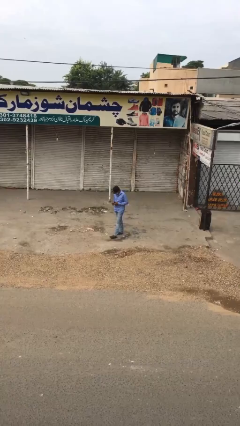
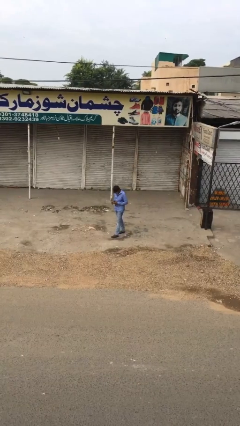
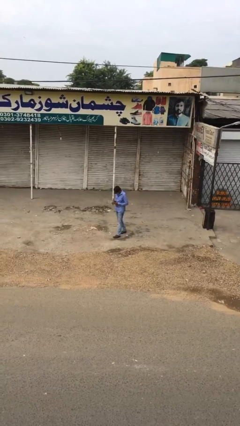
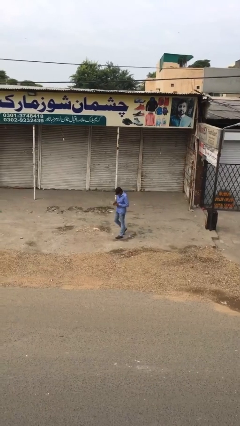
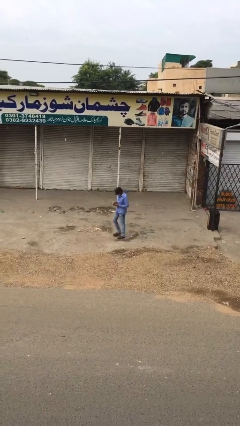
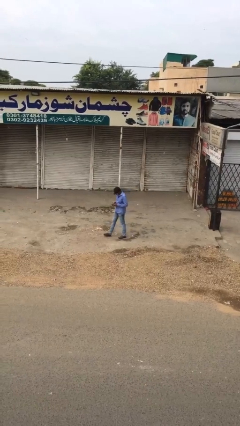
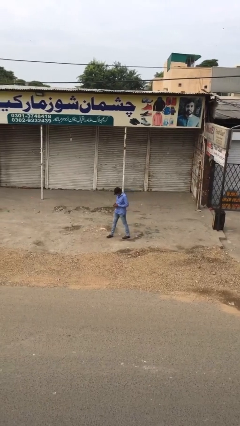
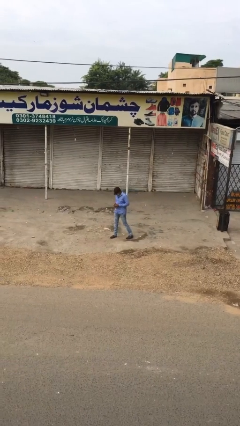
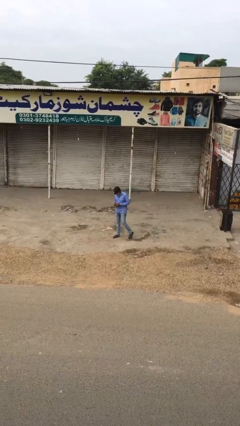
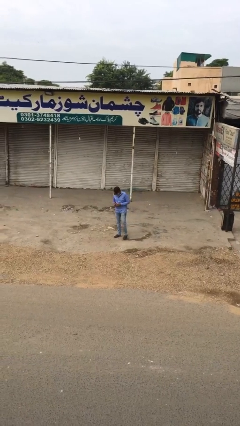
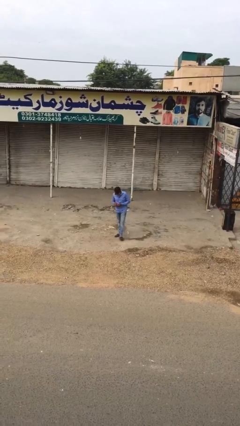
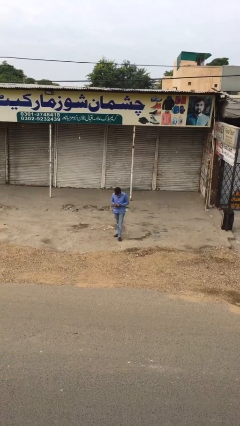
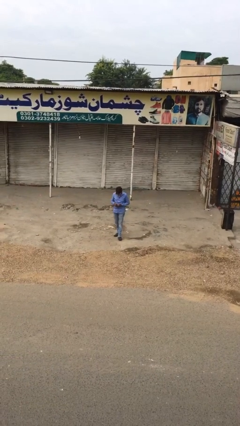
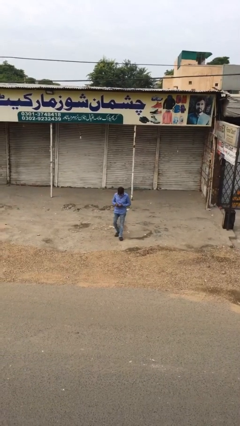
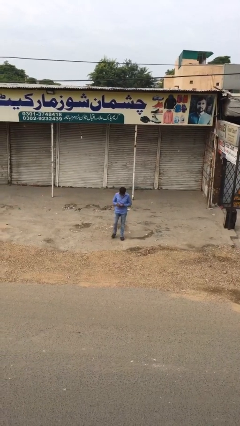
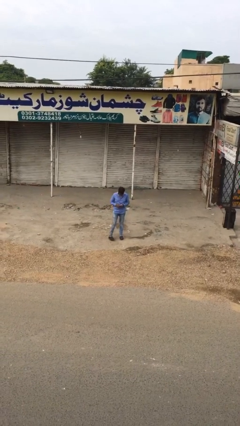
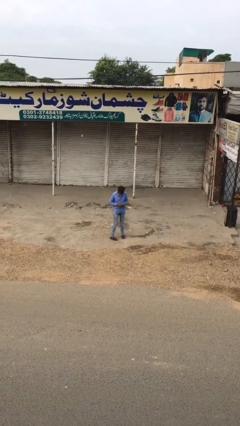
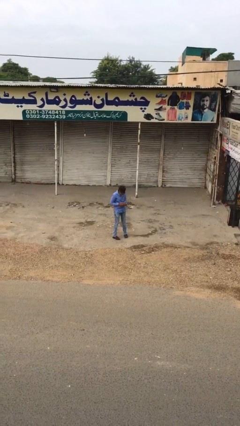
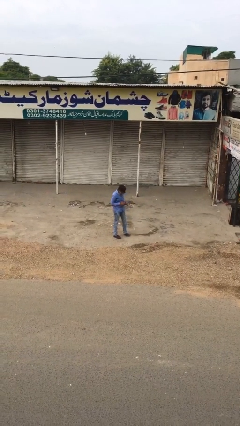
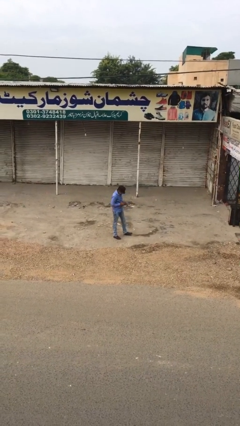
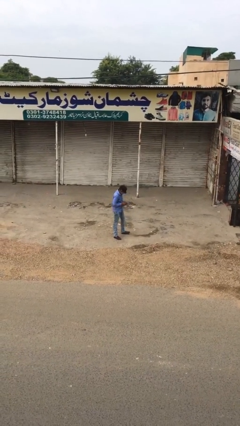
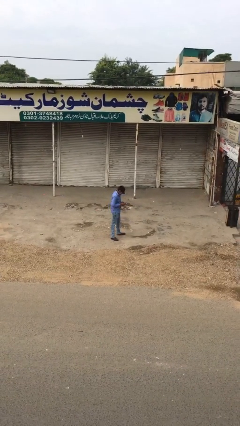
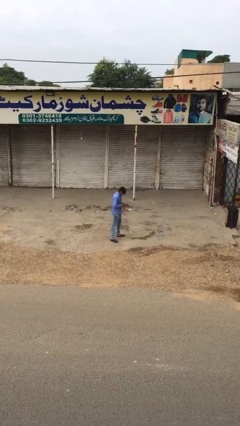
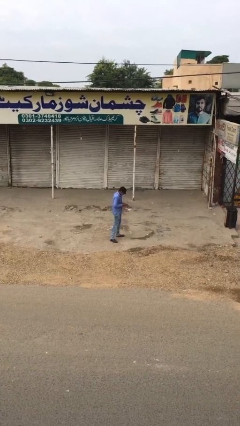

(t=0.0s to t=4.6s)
person texts on phone

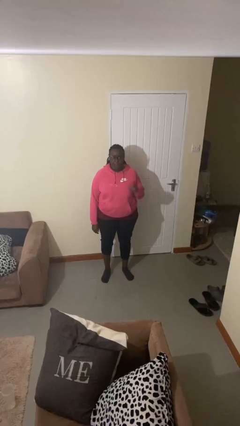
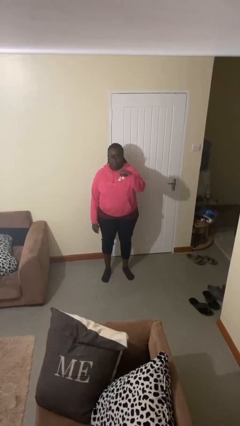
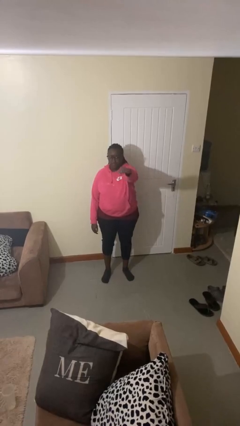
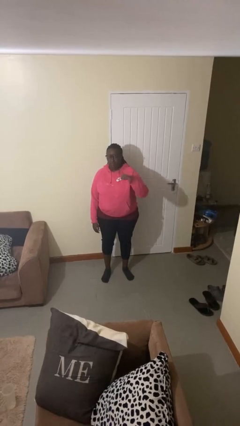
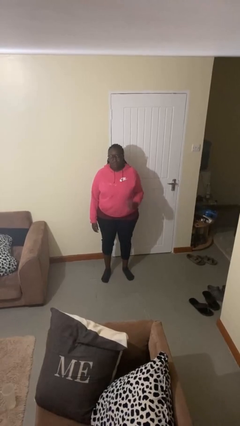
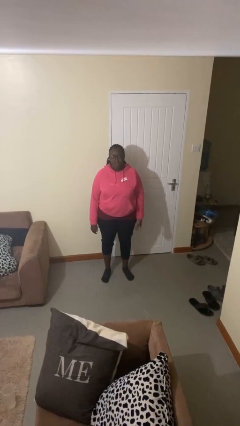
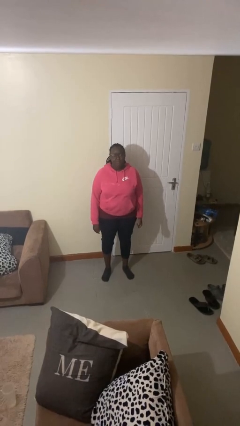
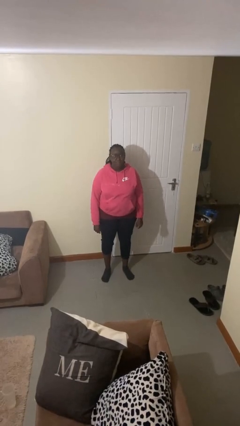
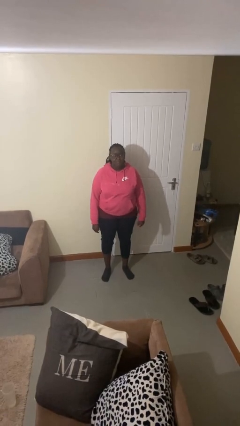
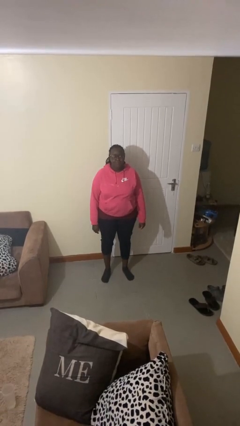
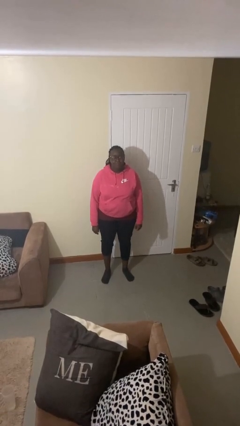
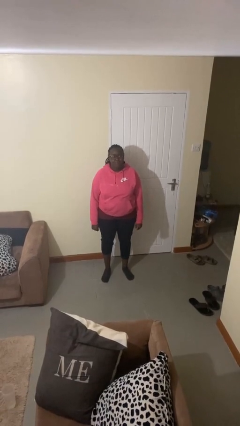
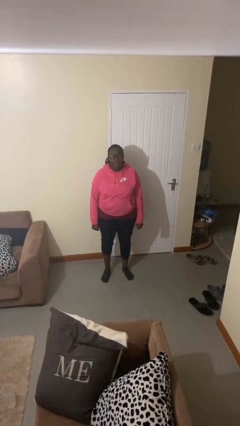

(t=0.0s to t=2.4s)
person punches

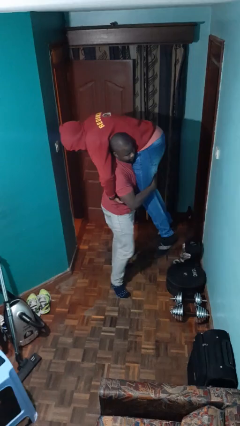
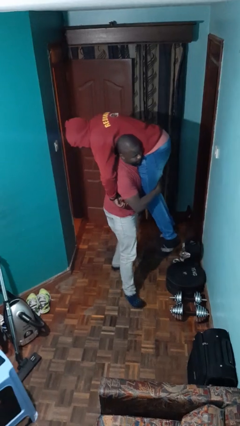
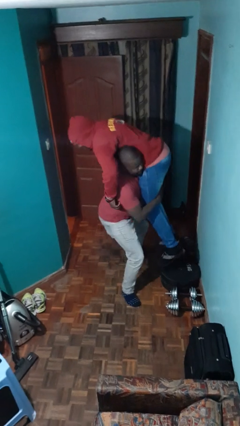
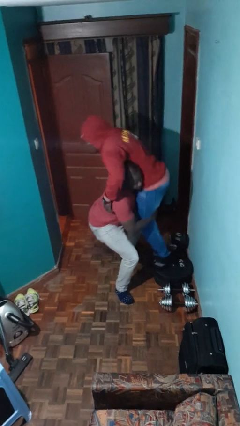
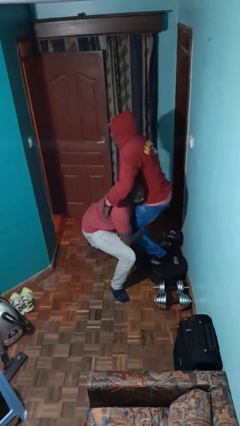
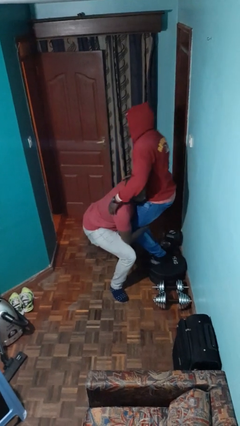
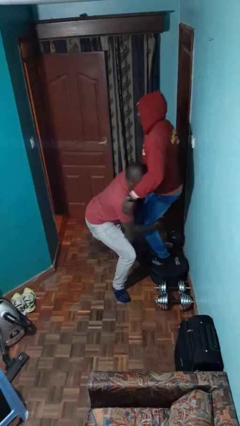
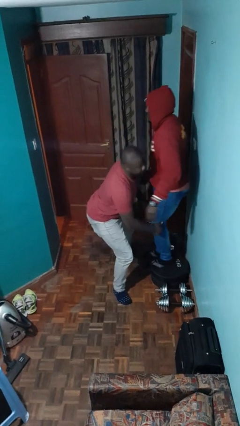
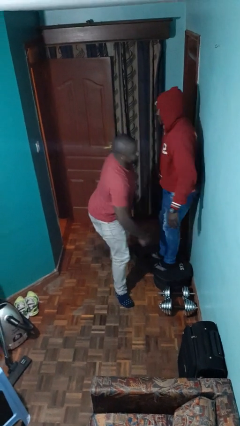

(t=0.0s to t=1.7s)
person puts down person

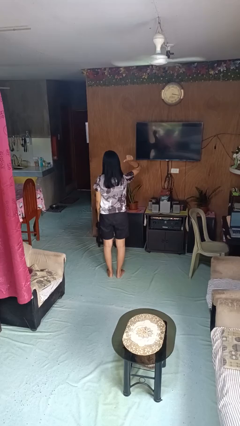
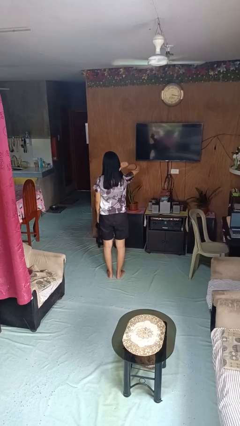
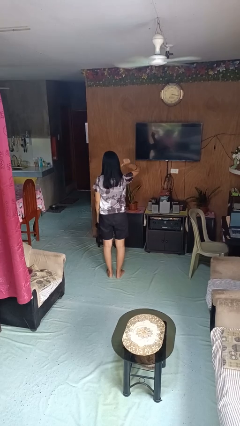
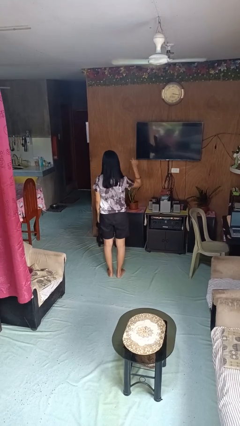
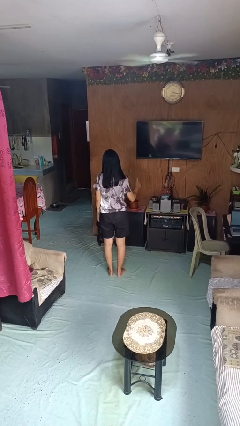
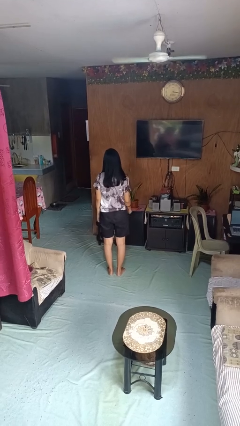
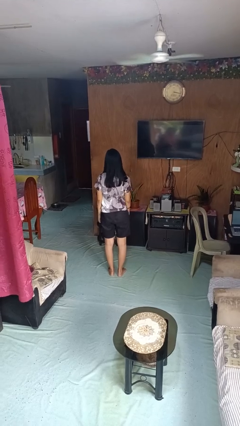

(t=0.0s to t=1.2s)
person gestures behind me

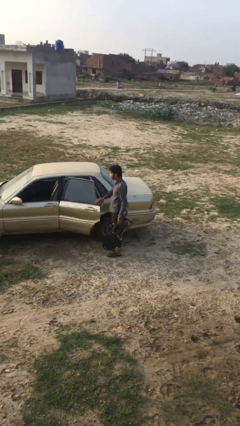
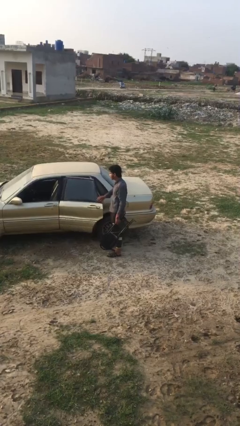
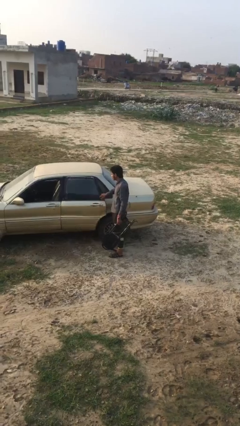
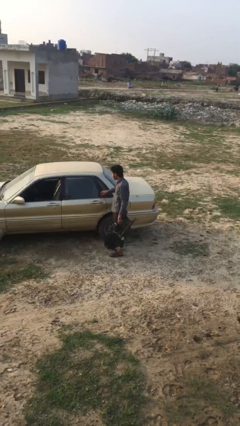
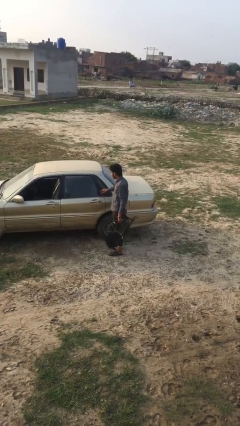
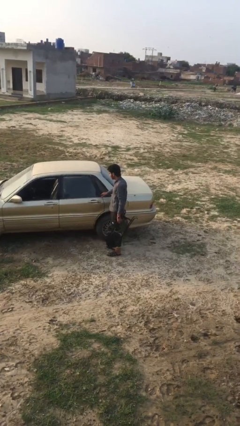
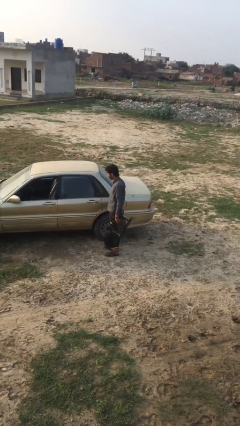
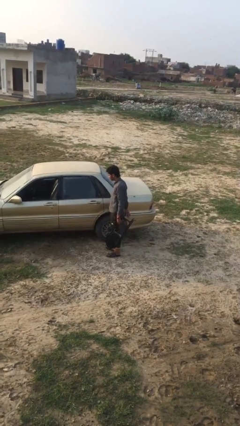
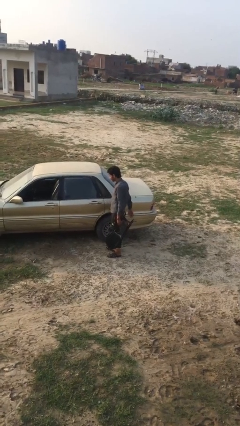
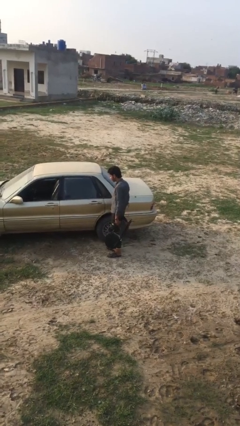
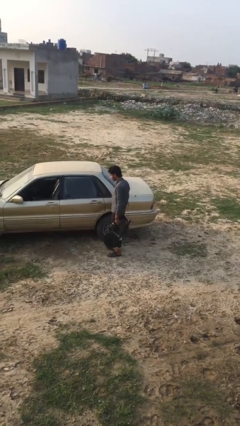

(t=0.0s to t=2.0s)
person closes car door

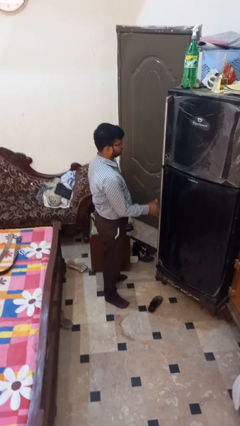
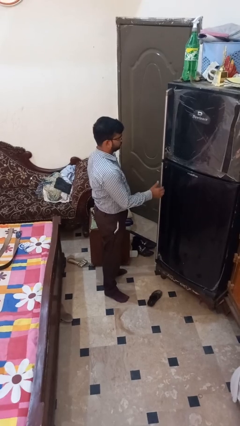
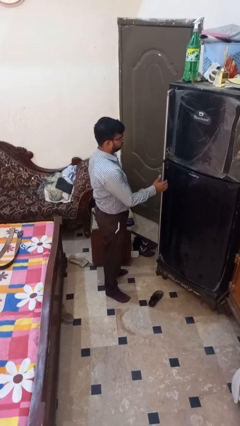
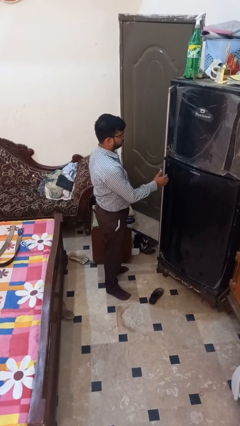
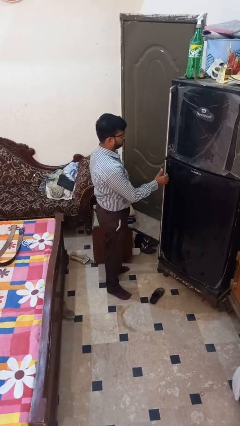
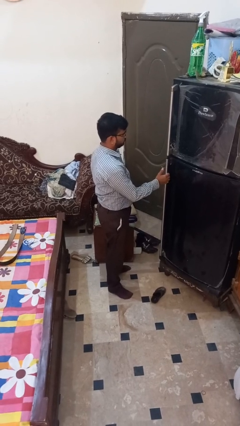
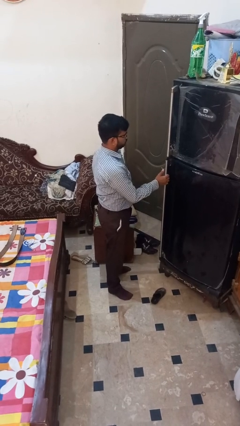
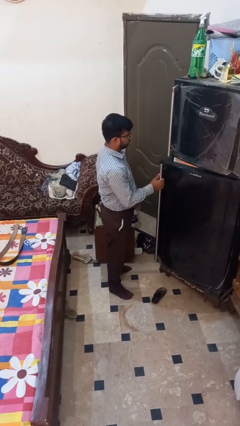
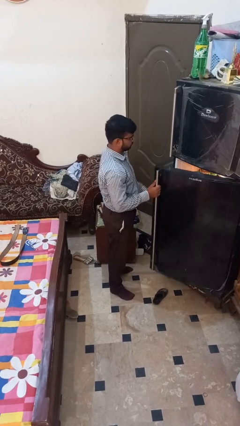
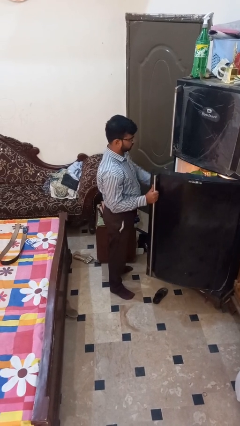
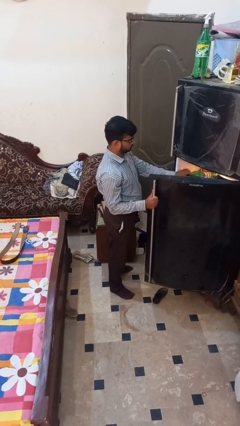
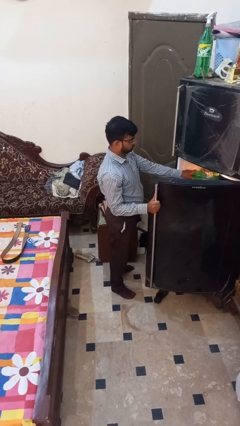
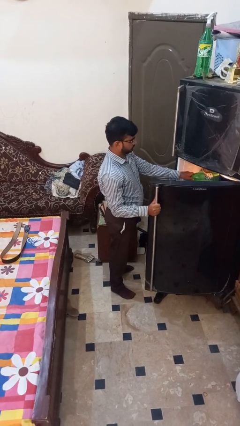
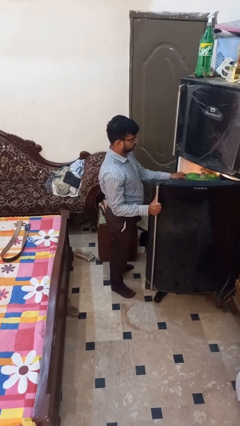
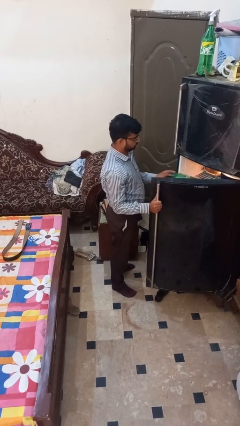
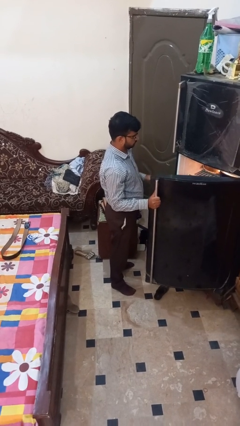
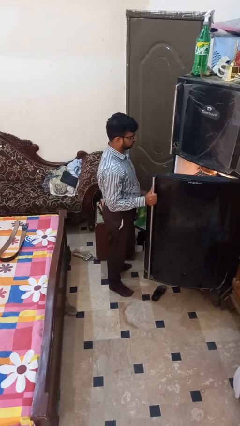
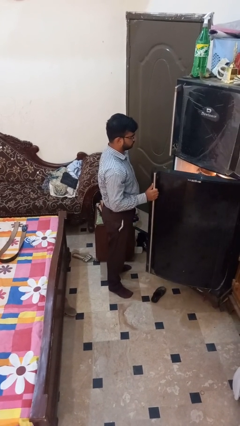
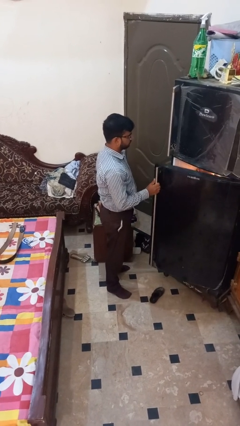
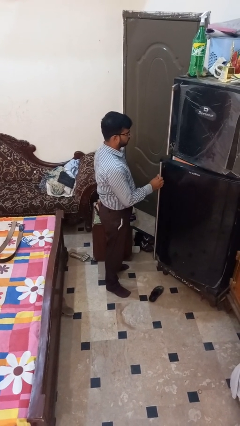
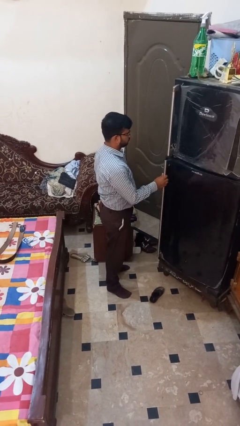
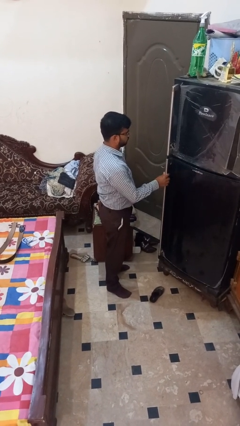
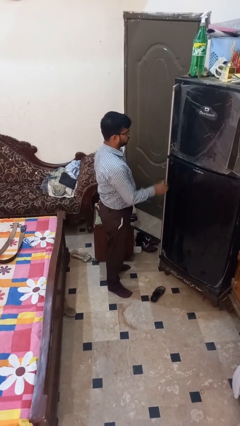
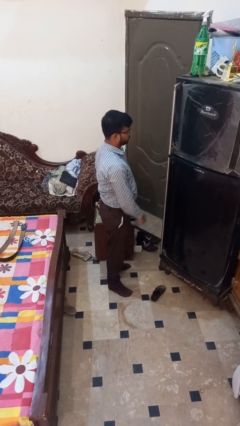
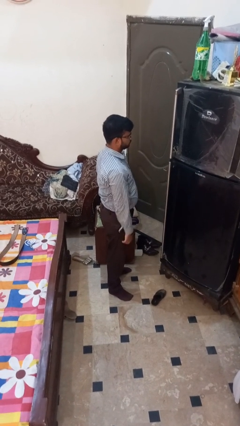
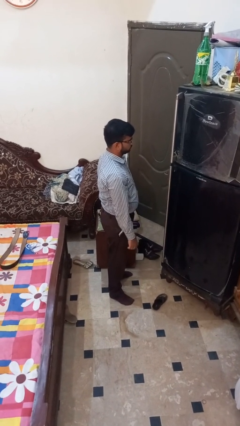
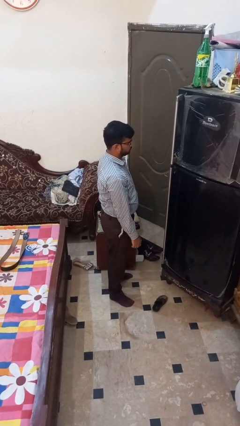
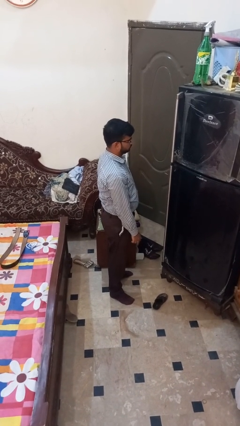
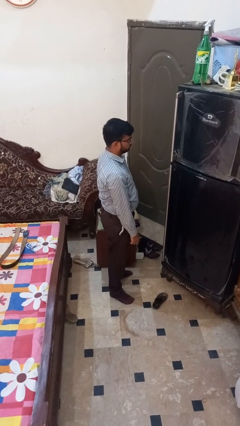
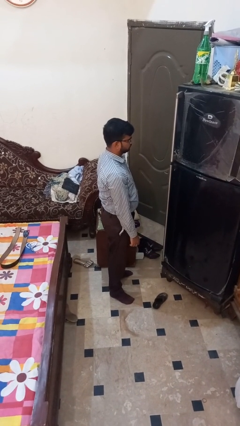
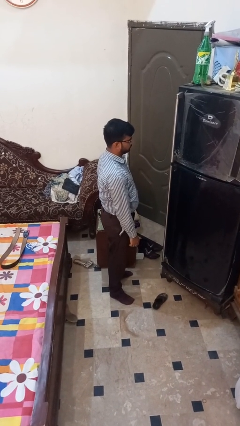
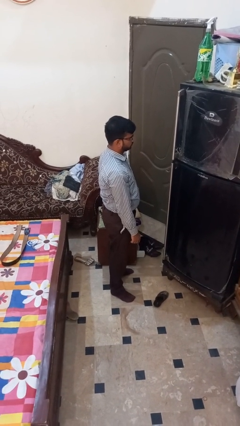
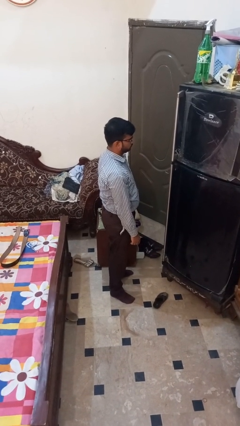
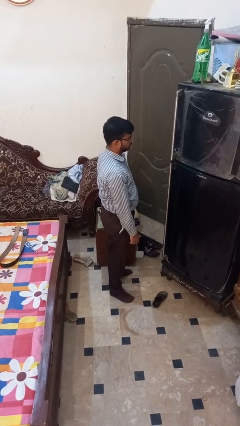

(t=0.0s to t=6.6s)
person takes object from refrigerator
